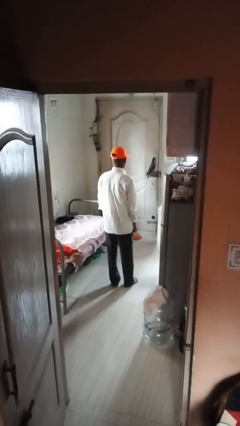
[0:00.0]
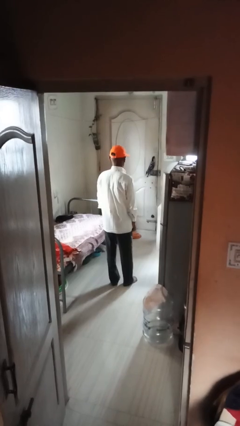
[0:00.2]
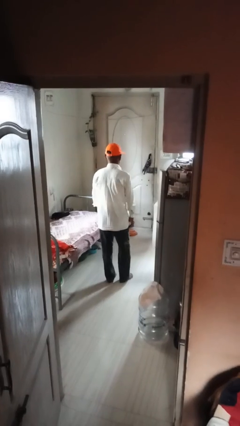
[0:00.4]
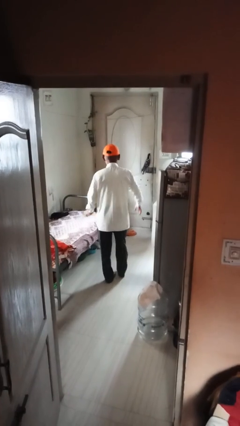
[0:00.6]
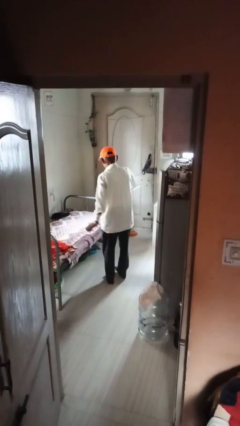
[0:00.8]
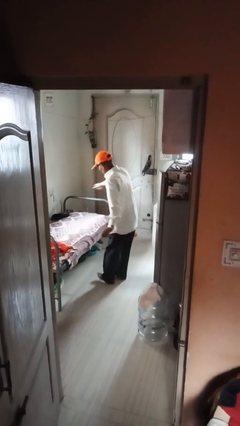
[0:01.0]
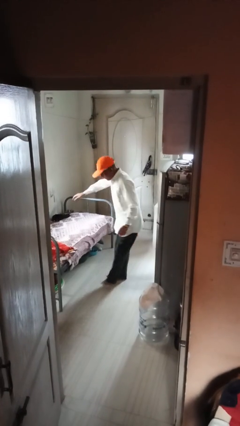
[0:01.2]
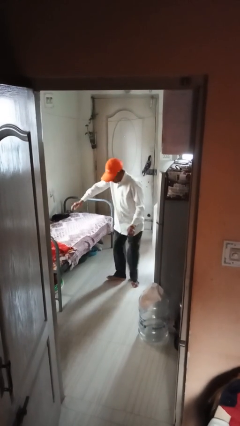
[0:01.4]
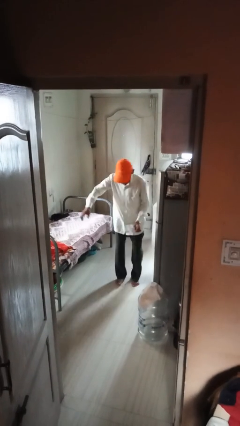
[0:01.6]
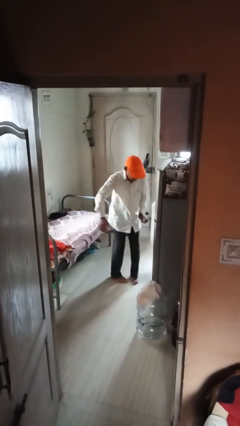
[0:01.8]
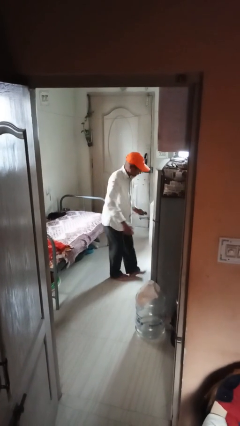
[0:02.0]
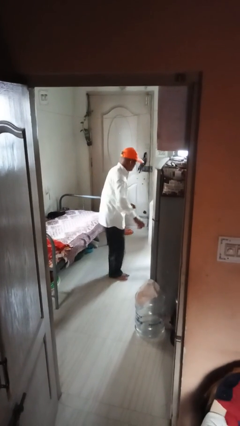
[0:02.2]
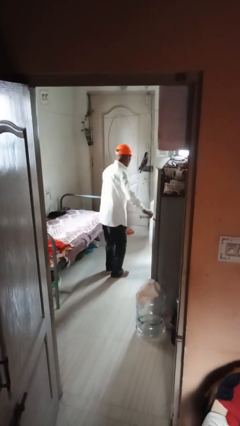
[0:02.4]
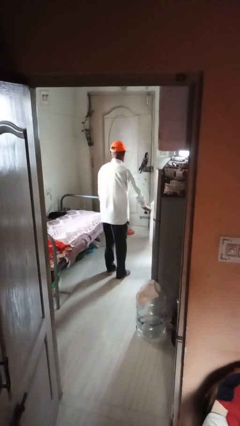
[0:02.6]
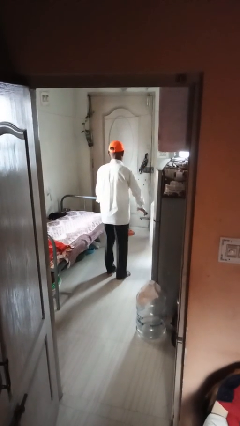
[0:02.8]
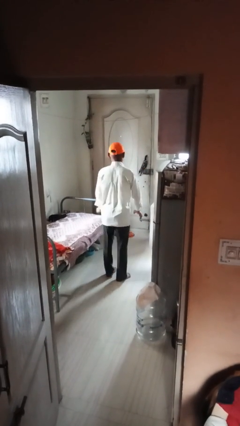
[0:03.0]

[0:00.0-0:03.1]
person twirls

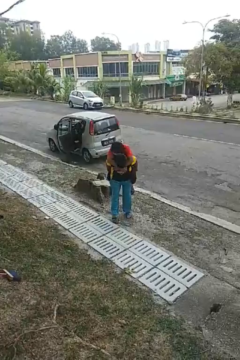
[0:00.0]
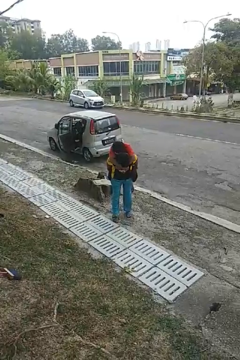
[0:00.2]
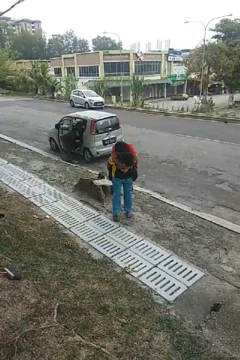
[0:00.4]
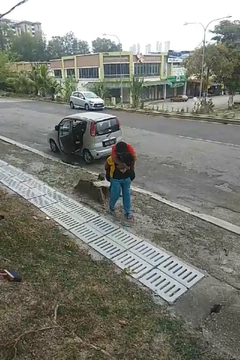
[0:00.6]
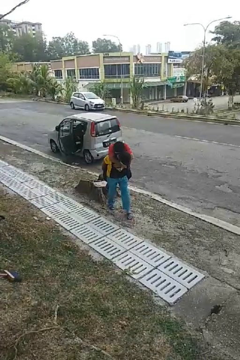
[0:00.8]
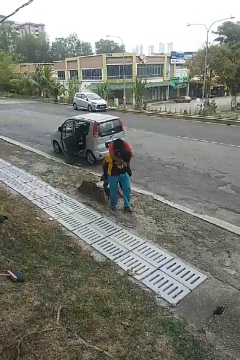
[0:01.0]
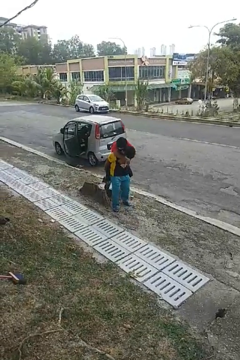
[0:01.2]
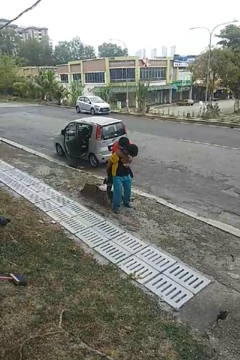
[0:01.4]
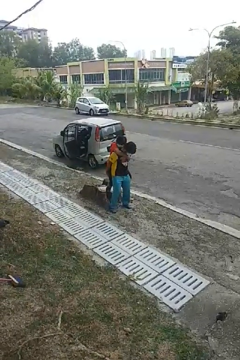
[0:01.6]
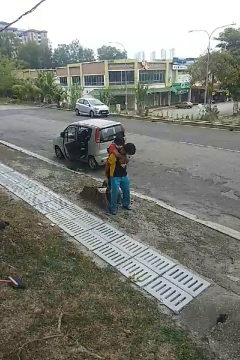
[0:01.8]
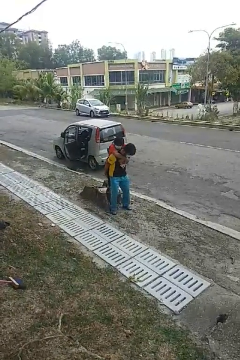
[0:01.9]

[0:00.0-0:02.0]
person puts down person

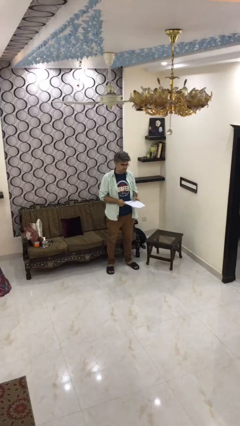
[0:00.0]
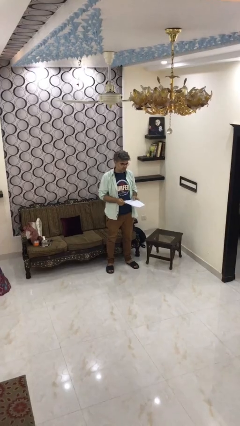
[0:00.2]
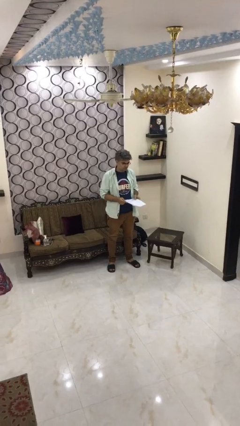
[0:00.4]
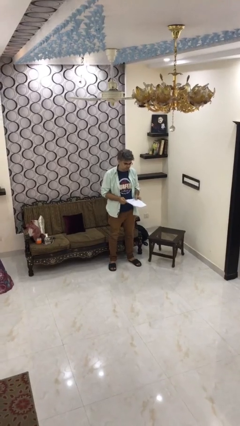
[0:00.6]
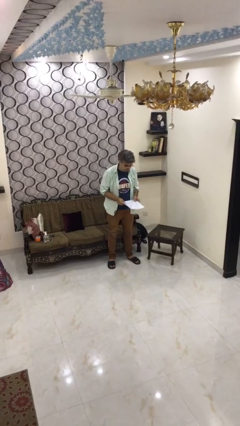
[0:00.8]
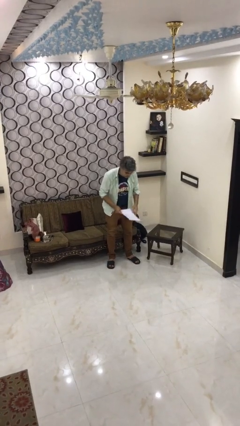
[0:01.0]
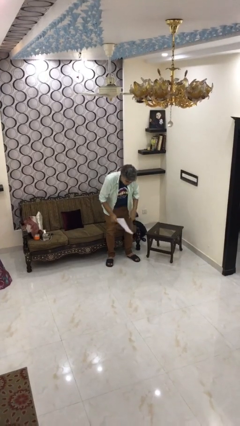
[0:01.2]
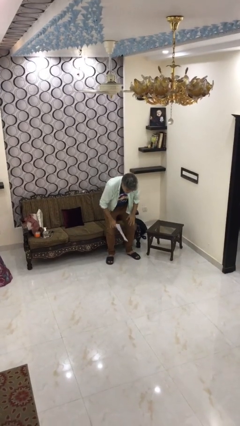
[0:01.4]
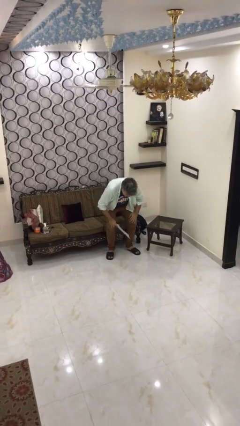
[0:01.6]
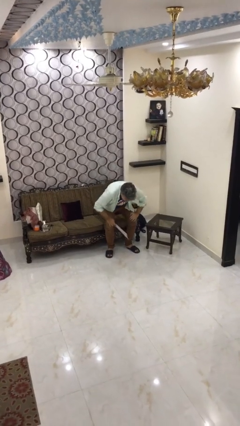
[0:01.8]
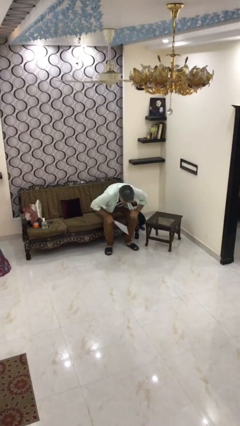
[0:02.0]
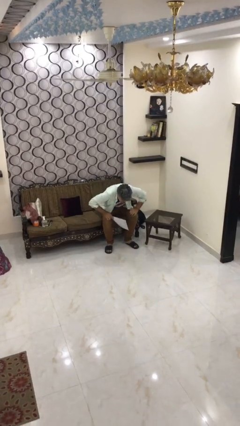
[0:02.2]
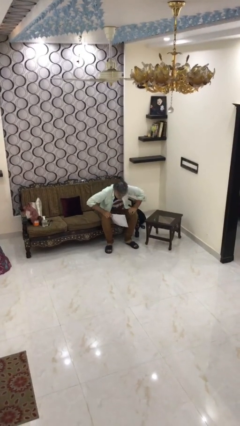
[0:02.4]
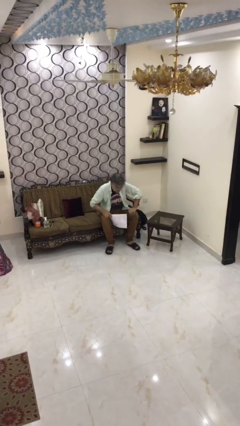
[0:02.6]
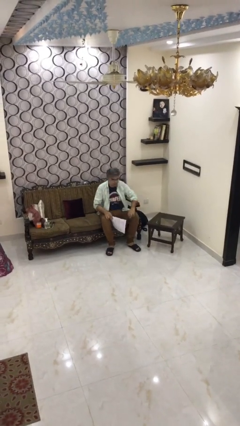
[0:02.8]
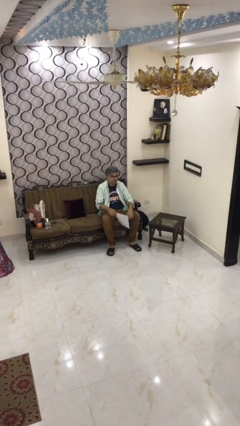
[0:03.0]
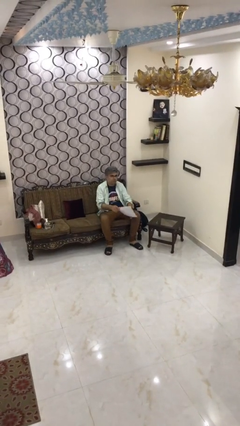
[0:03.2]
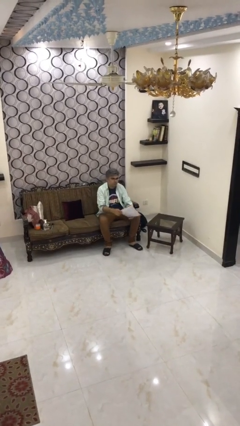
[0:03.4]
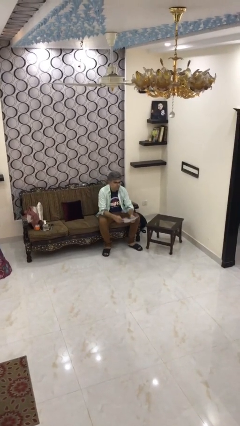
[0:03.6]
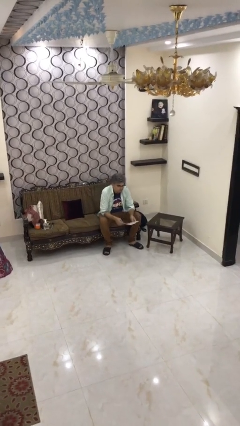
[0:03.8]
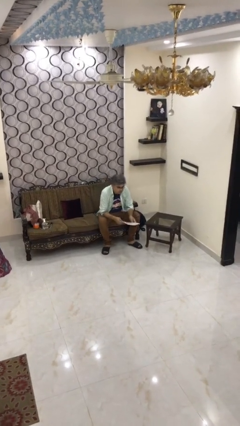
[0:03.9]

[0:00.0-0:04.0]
person sits down

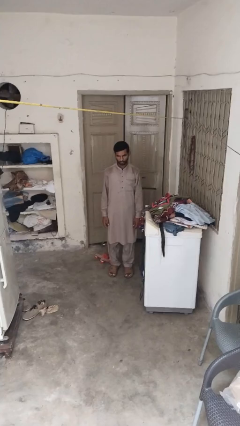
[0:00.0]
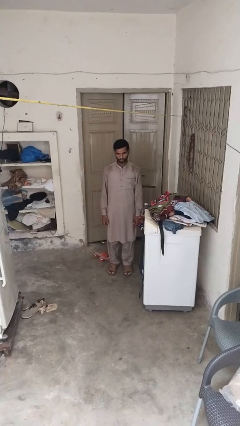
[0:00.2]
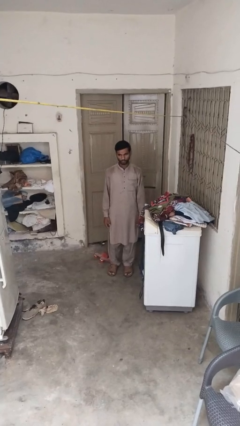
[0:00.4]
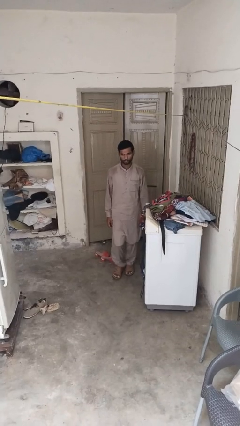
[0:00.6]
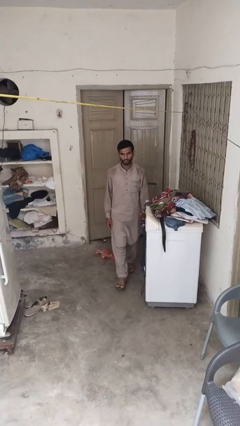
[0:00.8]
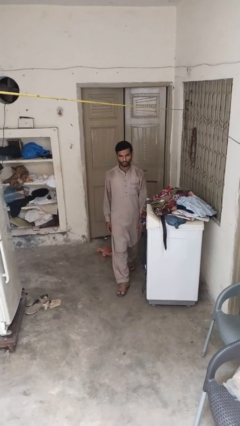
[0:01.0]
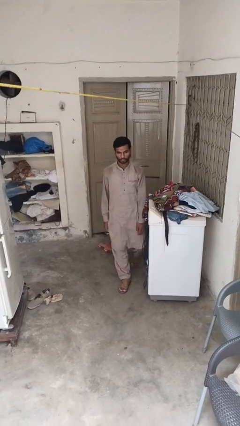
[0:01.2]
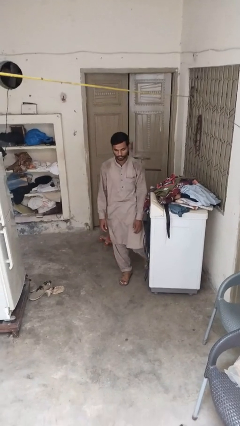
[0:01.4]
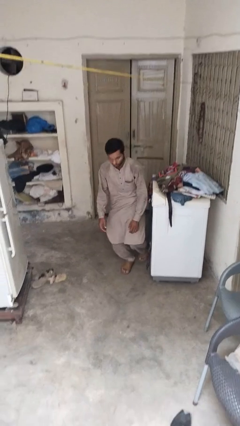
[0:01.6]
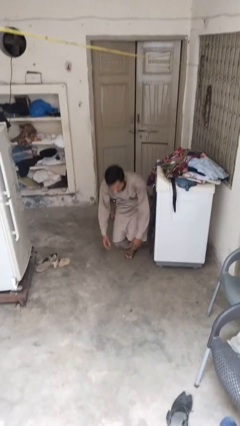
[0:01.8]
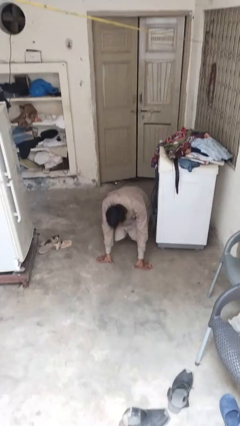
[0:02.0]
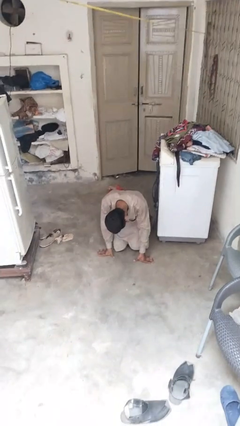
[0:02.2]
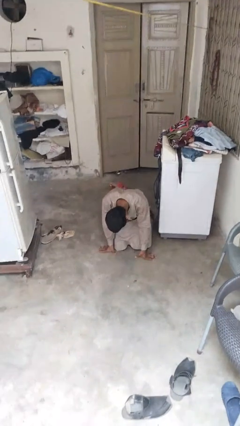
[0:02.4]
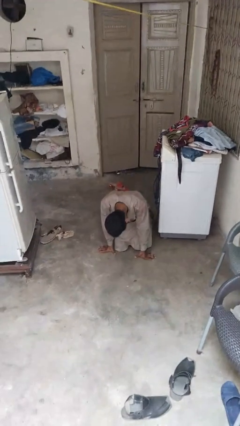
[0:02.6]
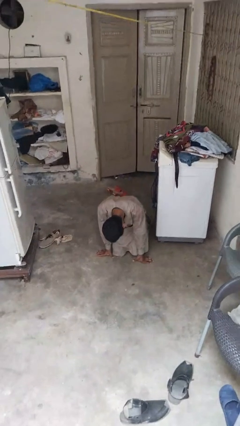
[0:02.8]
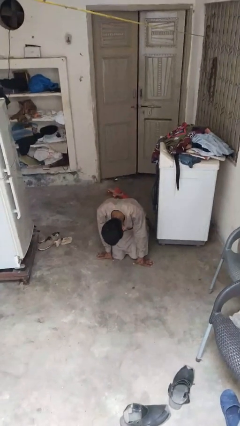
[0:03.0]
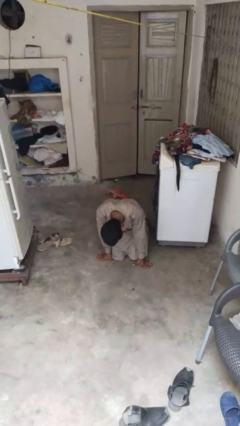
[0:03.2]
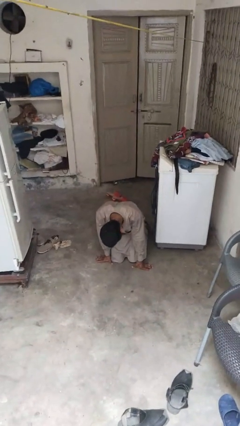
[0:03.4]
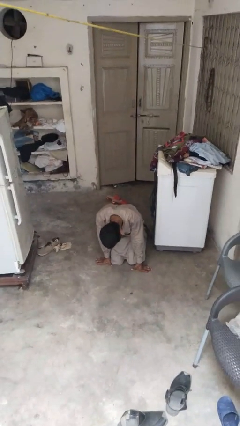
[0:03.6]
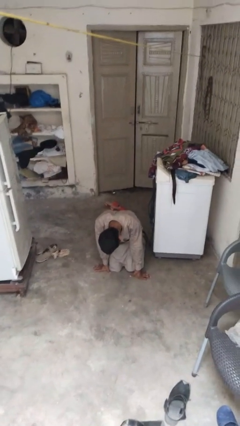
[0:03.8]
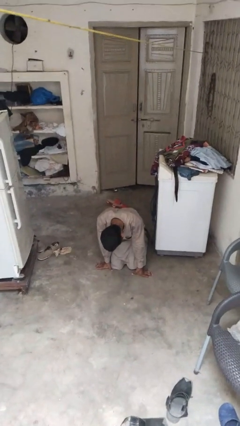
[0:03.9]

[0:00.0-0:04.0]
person trips on object on floor

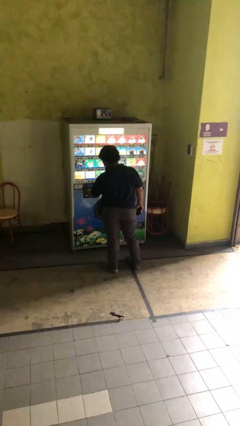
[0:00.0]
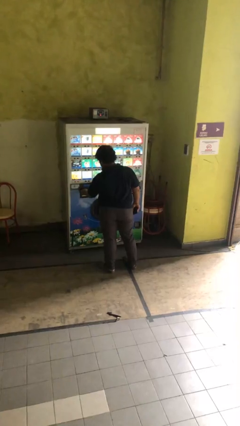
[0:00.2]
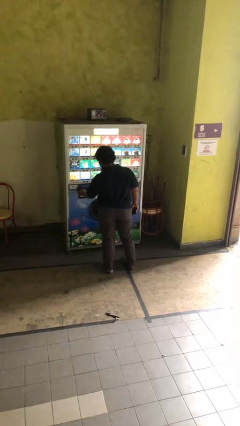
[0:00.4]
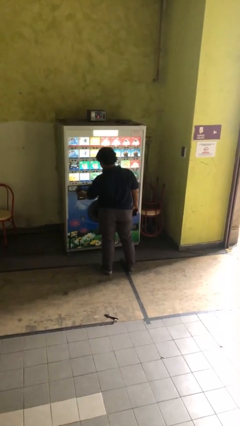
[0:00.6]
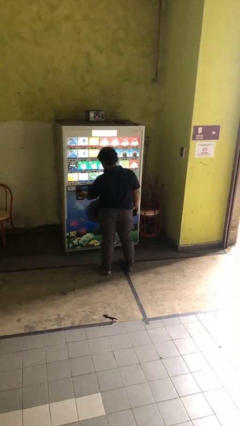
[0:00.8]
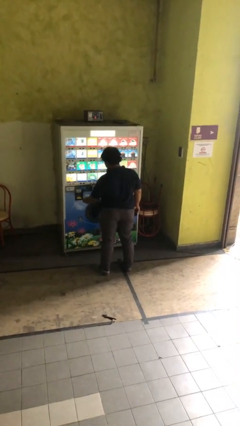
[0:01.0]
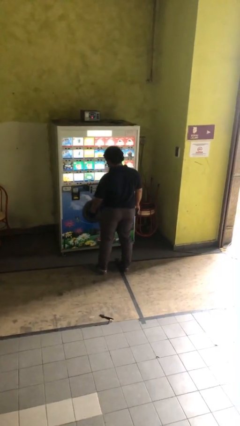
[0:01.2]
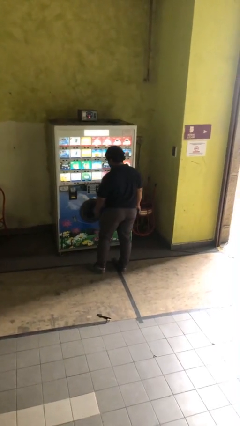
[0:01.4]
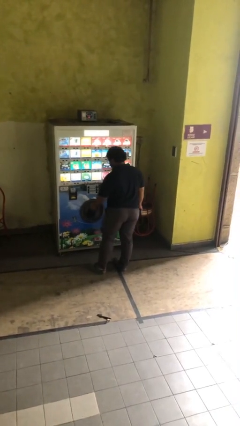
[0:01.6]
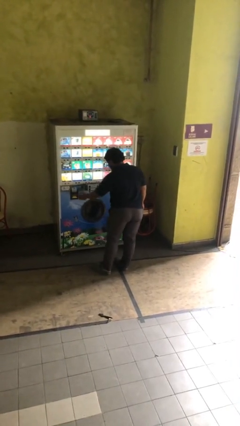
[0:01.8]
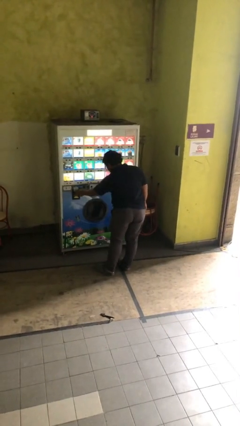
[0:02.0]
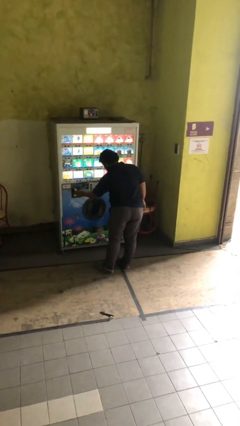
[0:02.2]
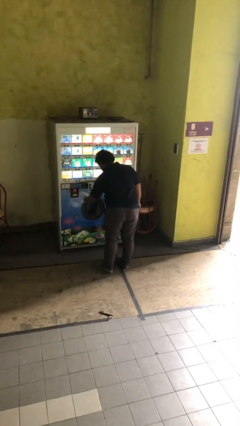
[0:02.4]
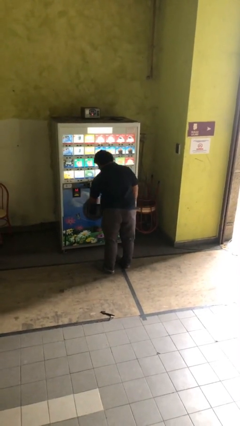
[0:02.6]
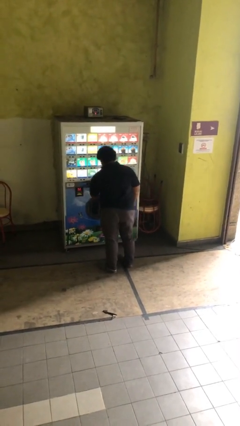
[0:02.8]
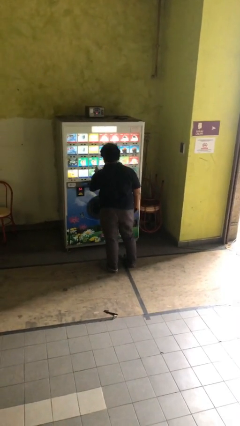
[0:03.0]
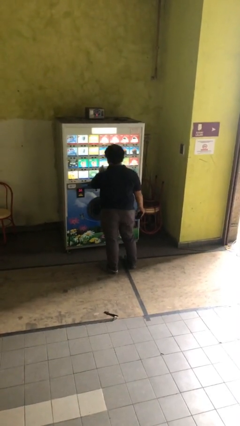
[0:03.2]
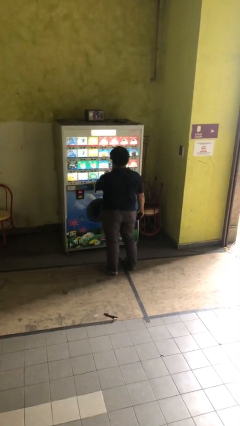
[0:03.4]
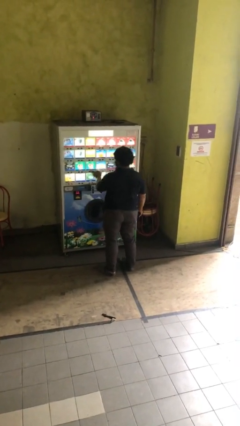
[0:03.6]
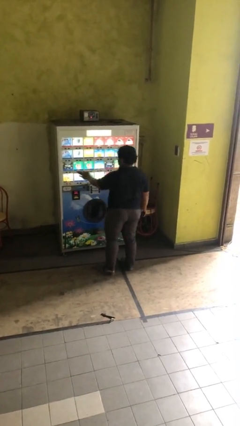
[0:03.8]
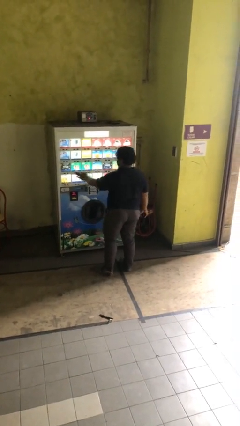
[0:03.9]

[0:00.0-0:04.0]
person purchases from machine

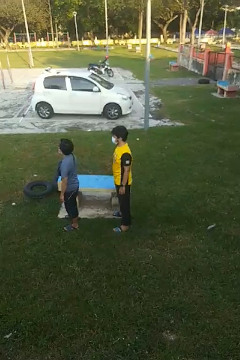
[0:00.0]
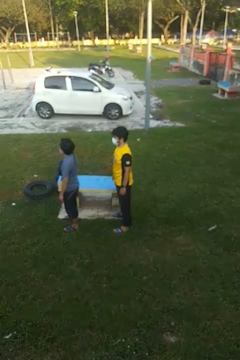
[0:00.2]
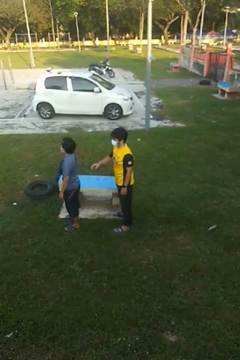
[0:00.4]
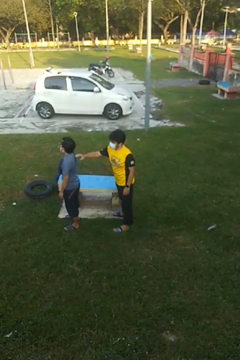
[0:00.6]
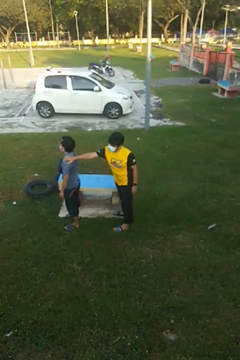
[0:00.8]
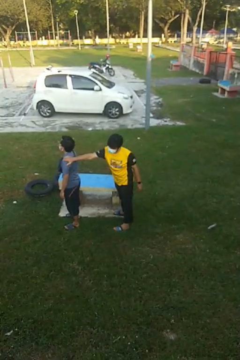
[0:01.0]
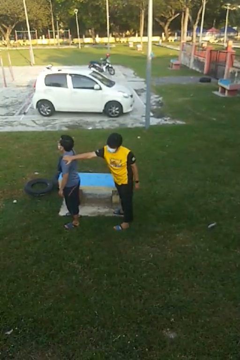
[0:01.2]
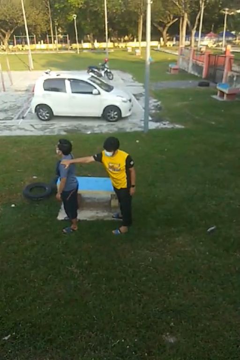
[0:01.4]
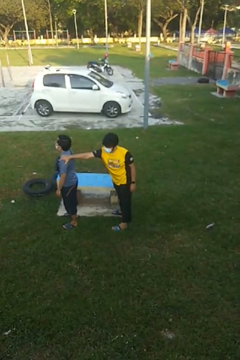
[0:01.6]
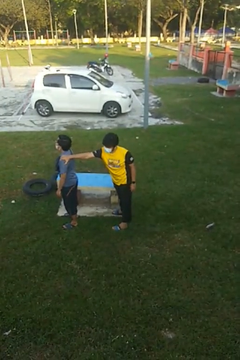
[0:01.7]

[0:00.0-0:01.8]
person grabs person by shoulder
